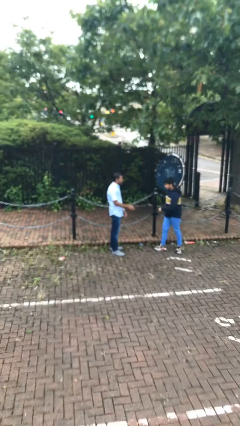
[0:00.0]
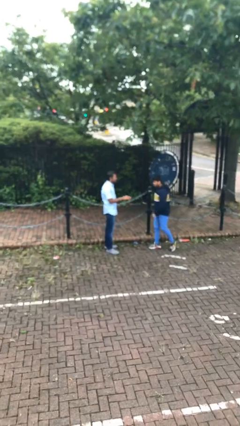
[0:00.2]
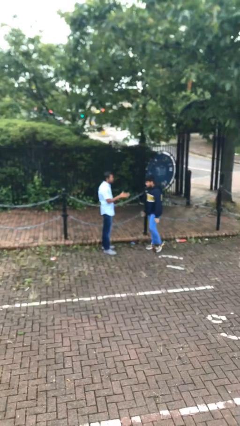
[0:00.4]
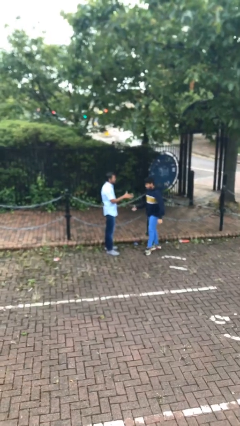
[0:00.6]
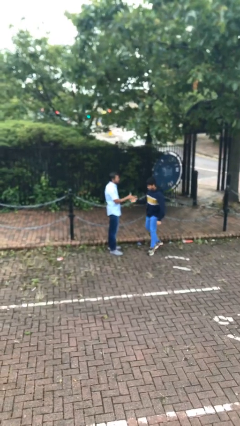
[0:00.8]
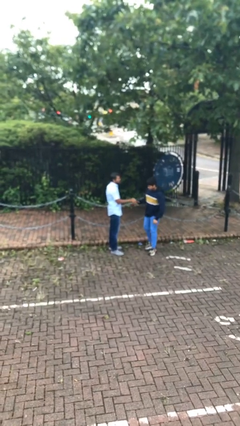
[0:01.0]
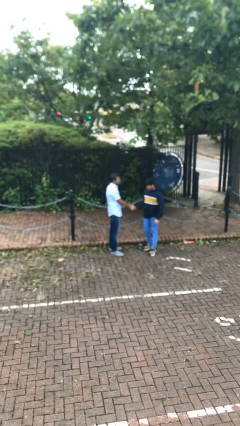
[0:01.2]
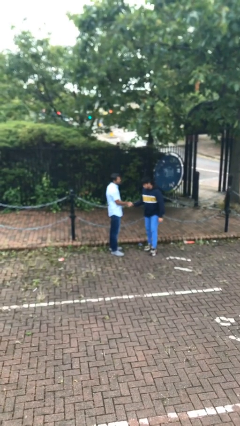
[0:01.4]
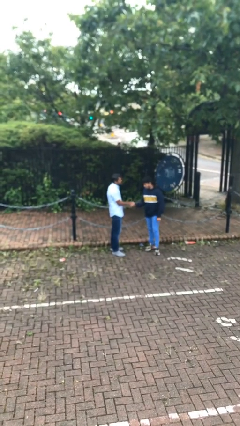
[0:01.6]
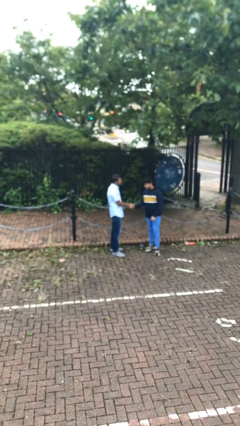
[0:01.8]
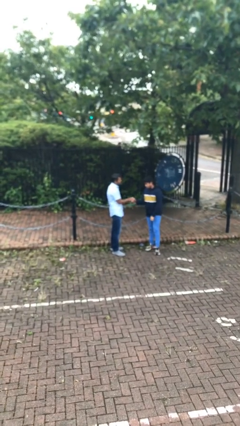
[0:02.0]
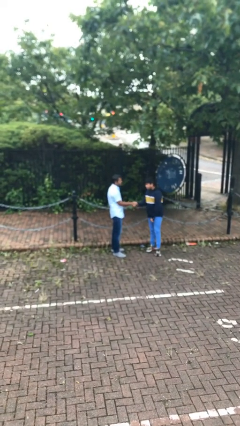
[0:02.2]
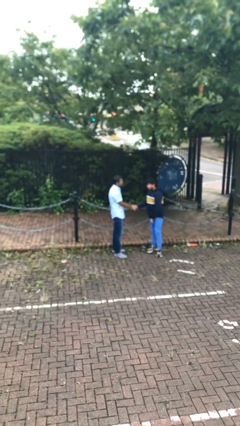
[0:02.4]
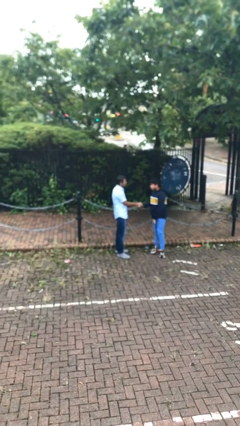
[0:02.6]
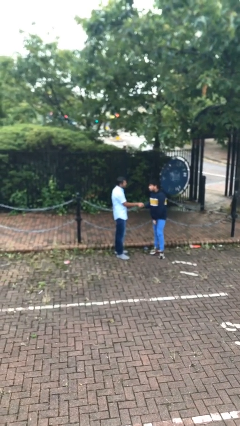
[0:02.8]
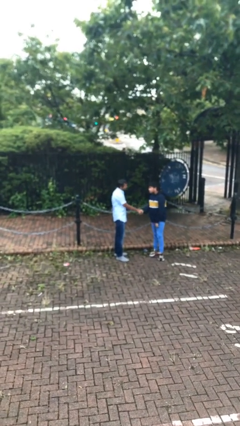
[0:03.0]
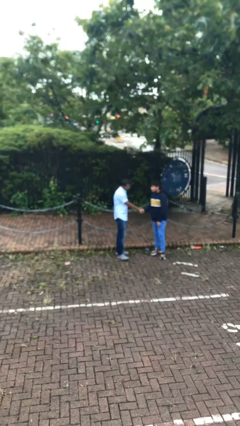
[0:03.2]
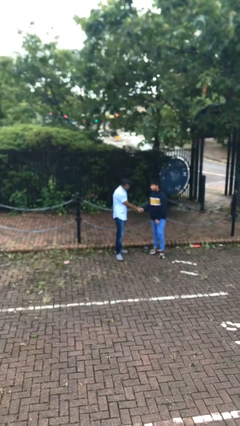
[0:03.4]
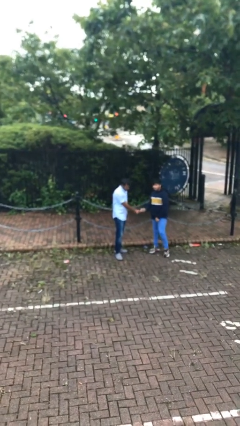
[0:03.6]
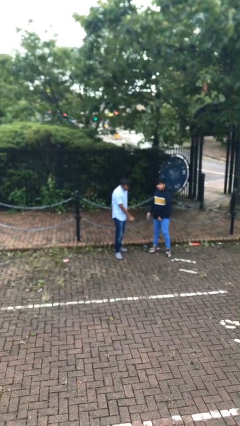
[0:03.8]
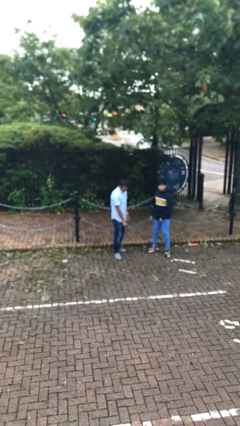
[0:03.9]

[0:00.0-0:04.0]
person shakes hand

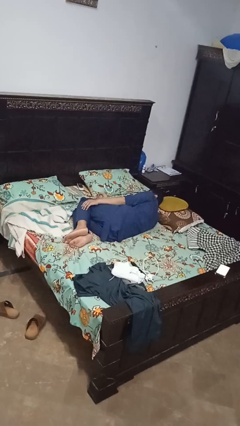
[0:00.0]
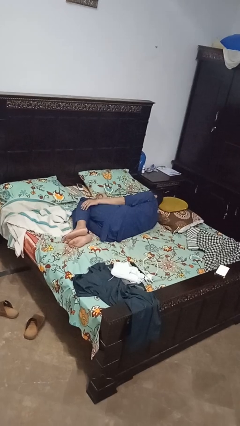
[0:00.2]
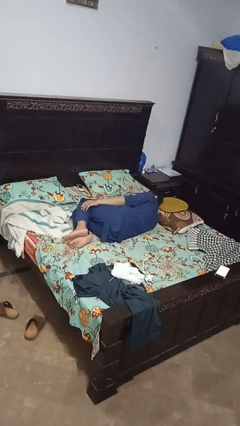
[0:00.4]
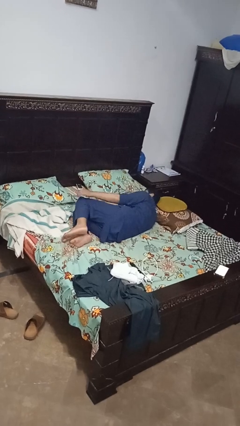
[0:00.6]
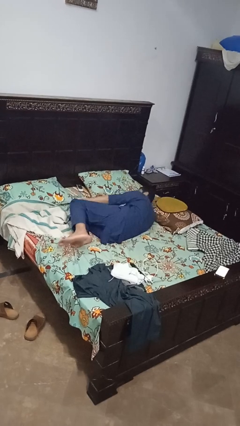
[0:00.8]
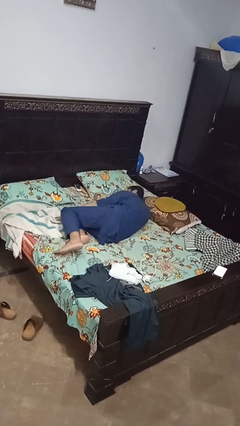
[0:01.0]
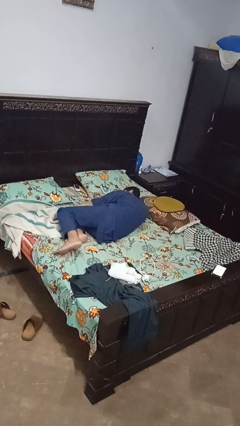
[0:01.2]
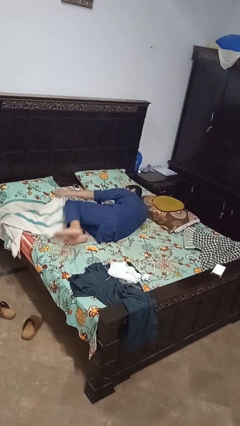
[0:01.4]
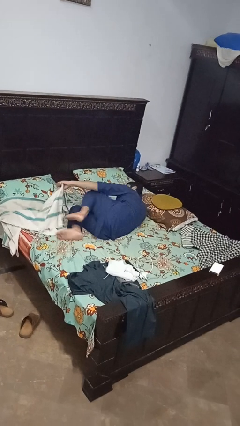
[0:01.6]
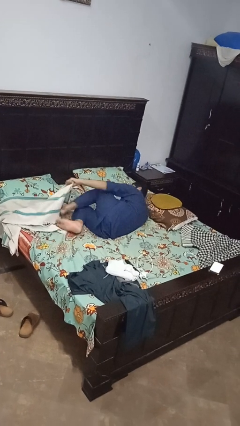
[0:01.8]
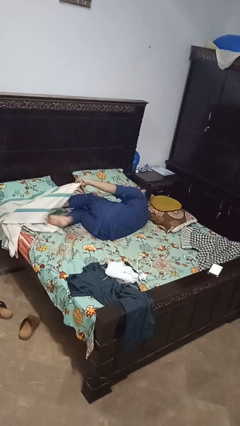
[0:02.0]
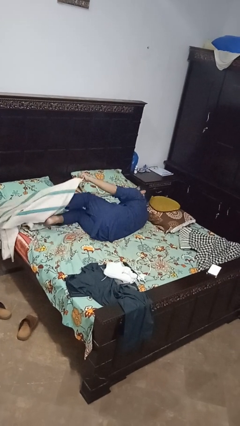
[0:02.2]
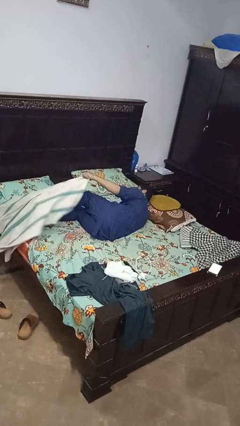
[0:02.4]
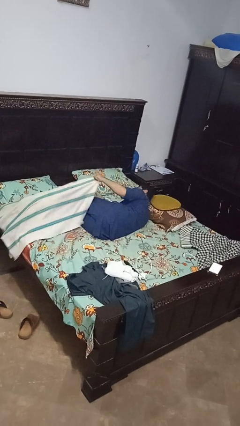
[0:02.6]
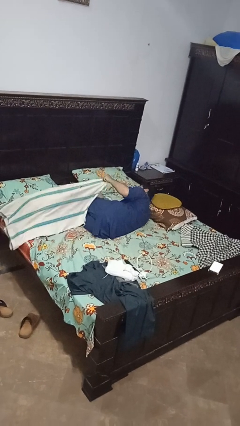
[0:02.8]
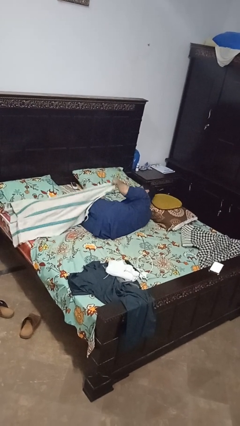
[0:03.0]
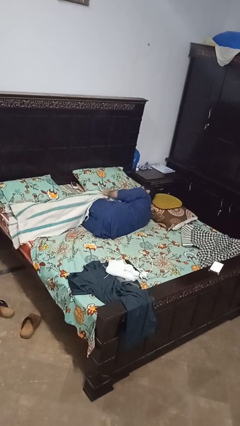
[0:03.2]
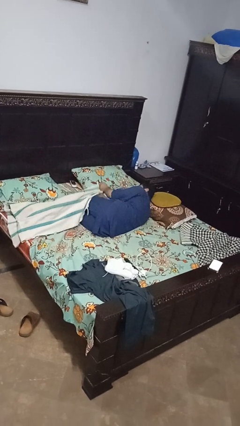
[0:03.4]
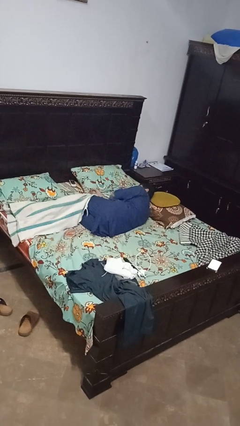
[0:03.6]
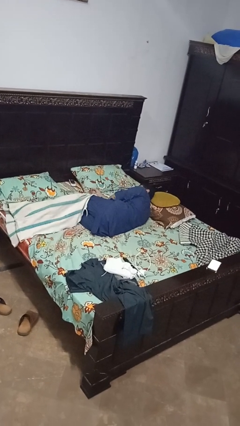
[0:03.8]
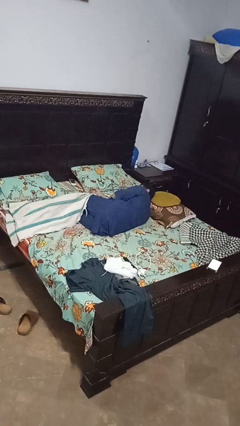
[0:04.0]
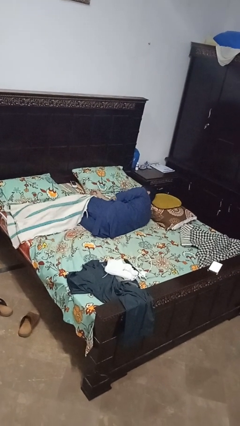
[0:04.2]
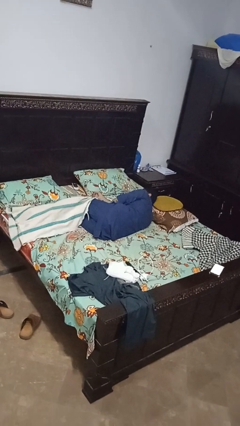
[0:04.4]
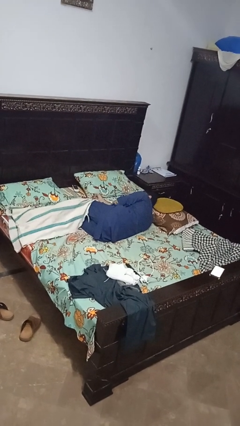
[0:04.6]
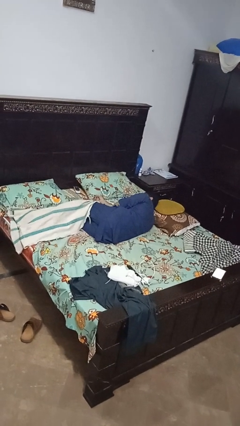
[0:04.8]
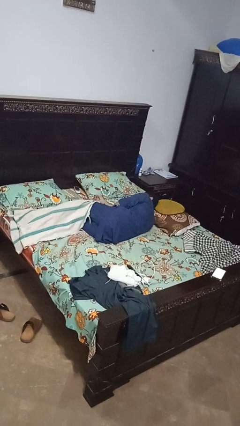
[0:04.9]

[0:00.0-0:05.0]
person covers with bedsheets

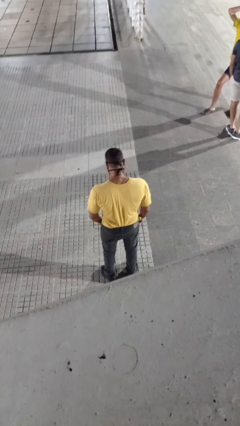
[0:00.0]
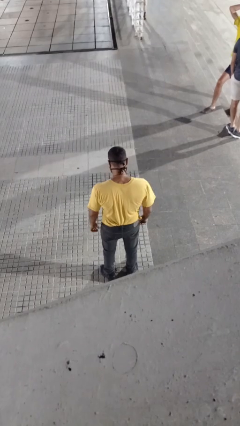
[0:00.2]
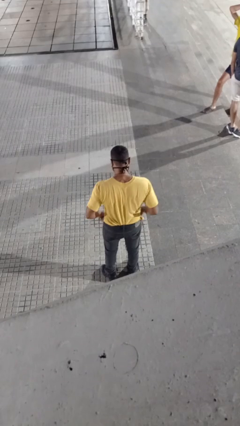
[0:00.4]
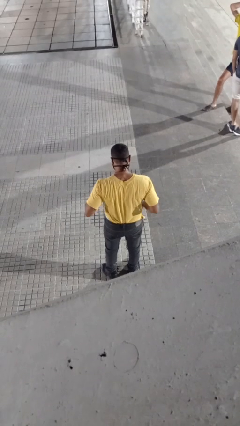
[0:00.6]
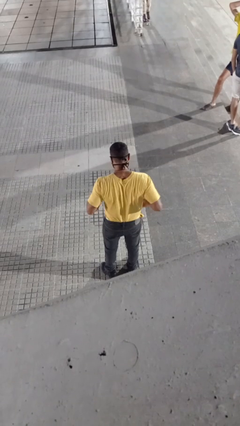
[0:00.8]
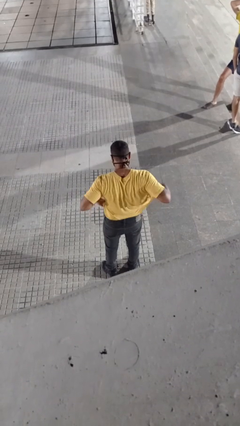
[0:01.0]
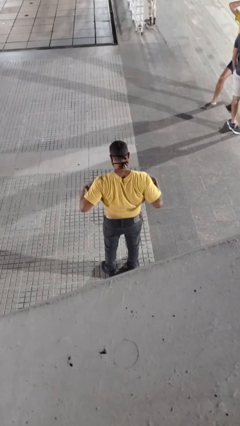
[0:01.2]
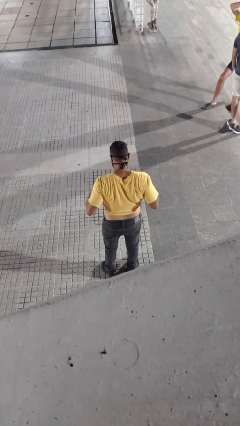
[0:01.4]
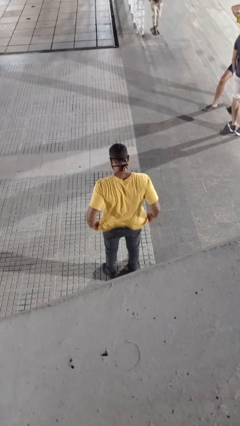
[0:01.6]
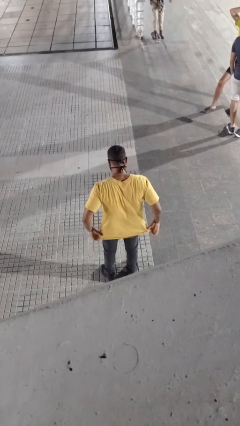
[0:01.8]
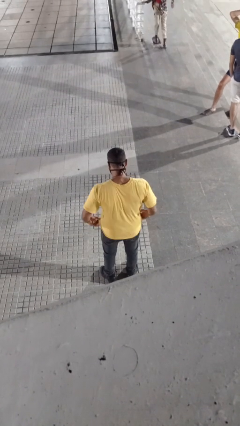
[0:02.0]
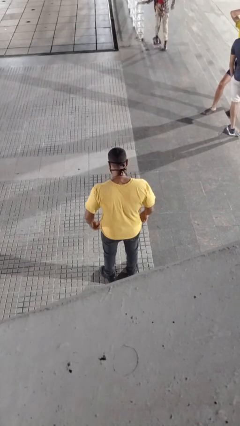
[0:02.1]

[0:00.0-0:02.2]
person untucks shirt

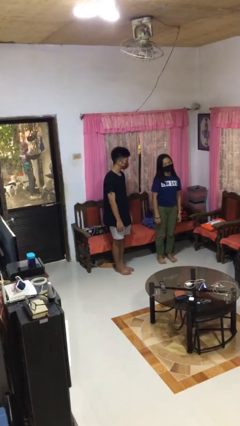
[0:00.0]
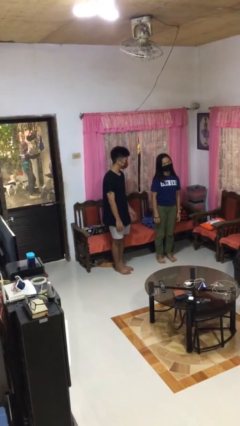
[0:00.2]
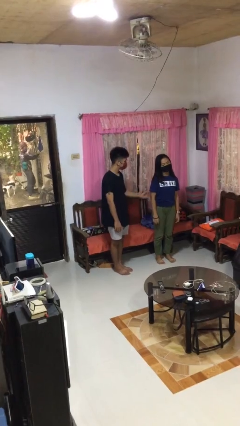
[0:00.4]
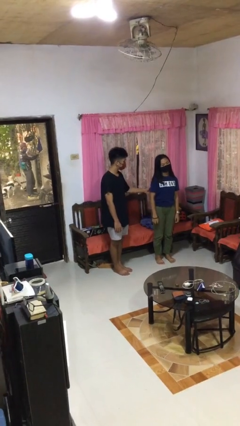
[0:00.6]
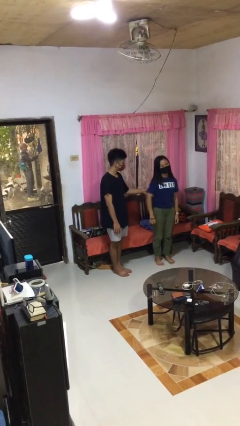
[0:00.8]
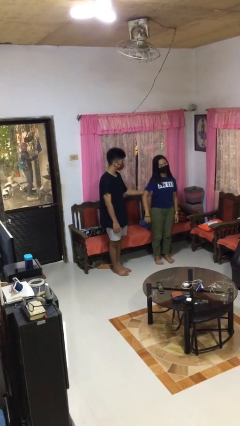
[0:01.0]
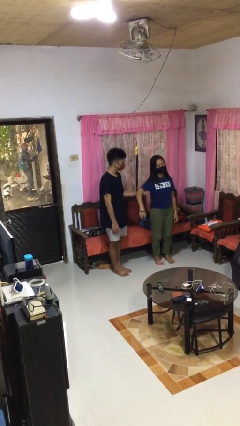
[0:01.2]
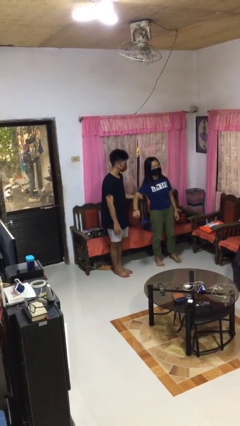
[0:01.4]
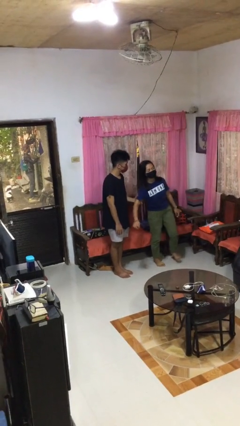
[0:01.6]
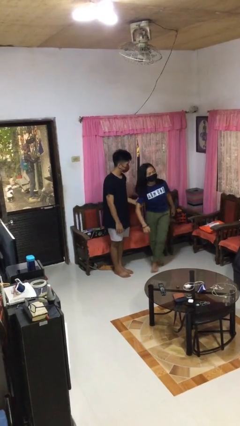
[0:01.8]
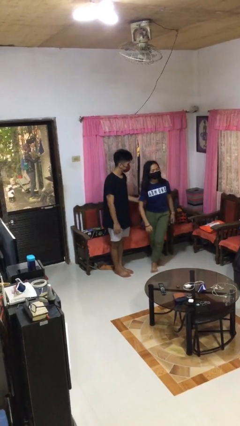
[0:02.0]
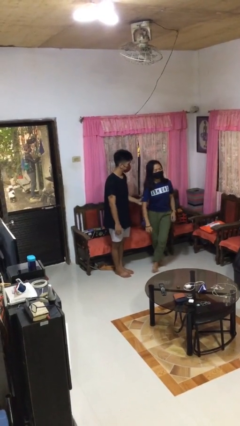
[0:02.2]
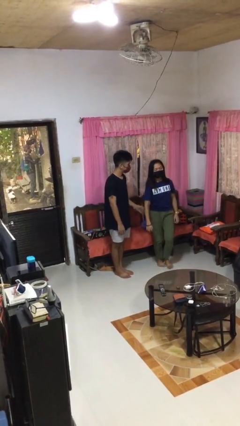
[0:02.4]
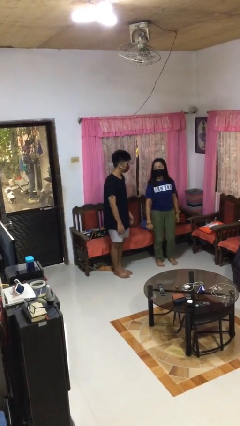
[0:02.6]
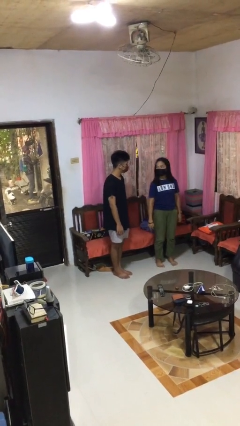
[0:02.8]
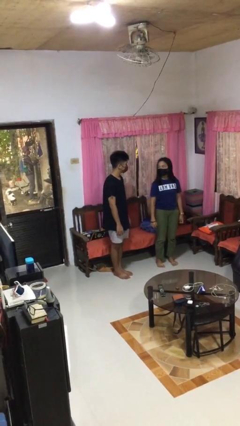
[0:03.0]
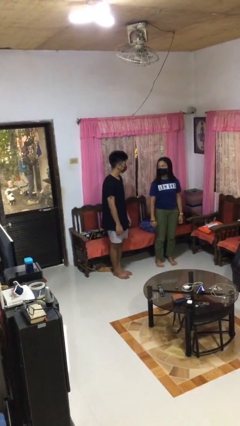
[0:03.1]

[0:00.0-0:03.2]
person grabs person by bicep

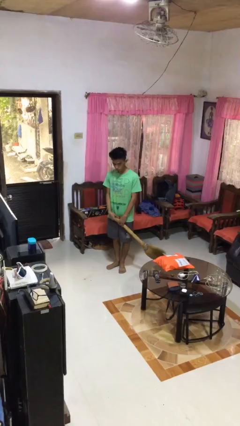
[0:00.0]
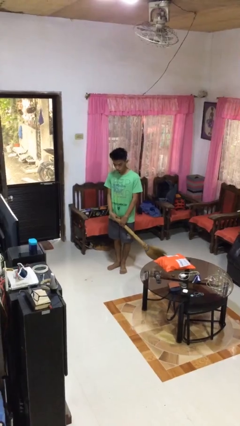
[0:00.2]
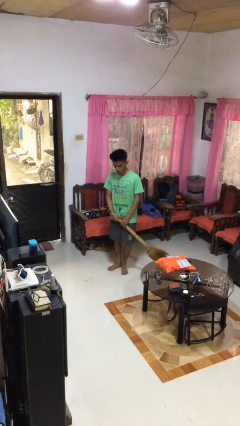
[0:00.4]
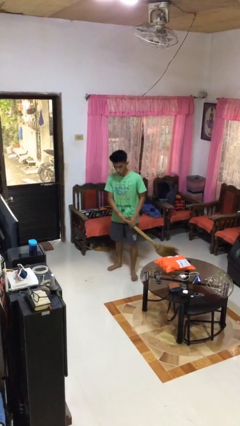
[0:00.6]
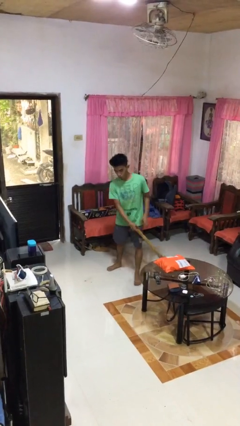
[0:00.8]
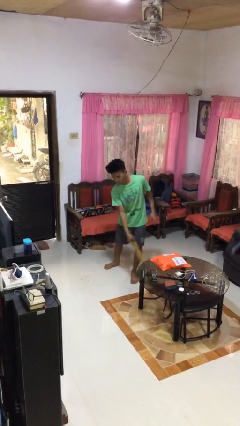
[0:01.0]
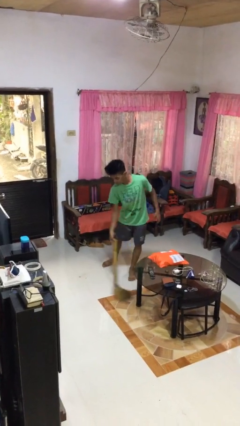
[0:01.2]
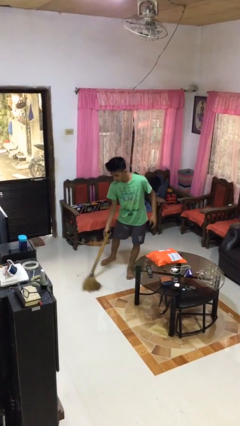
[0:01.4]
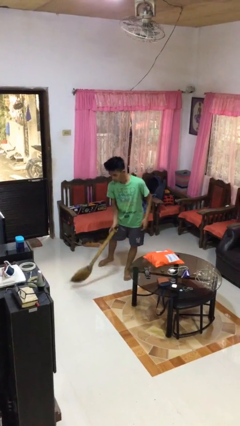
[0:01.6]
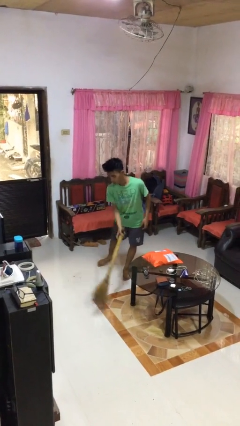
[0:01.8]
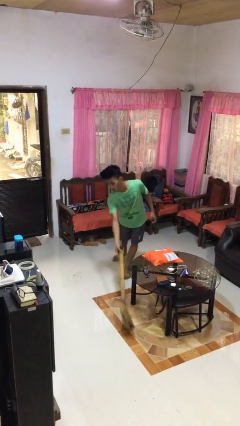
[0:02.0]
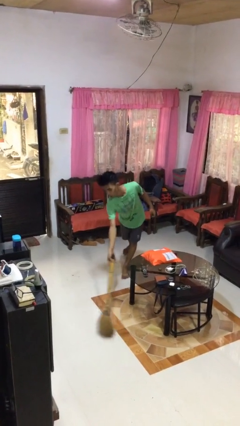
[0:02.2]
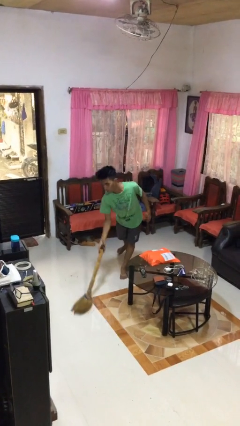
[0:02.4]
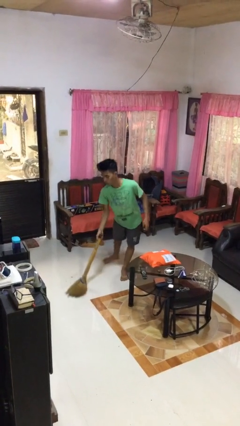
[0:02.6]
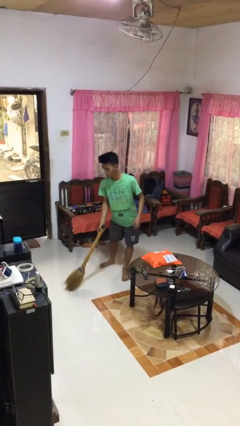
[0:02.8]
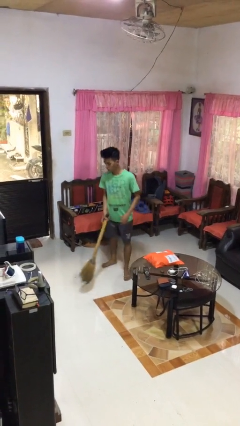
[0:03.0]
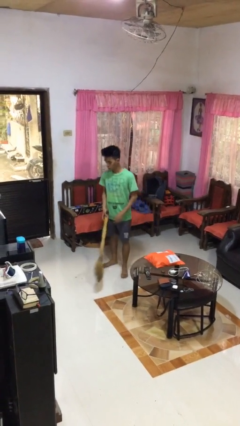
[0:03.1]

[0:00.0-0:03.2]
person sweeps floor

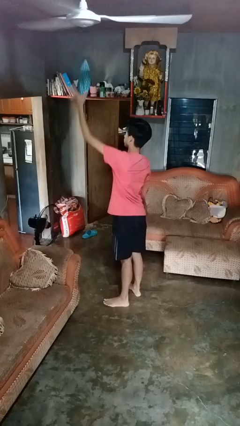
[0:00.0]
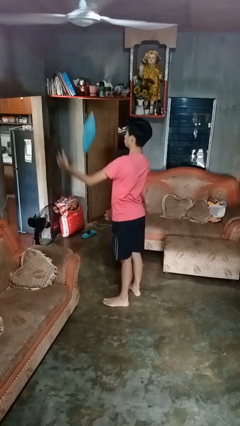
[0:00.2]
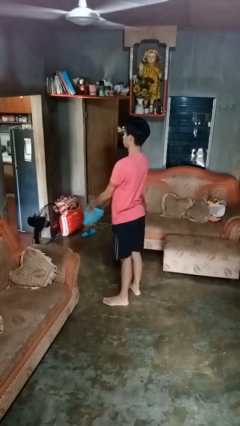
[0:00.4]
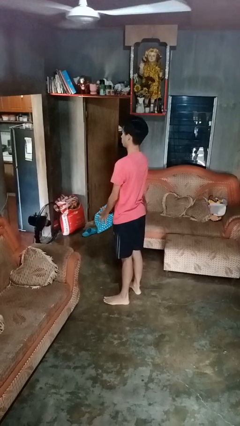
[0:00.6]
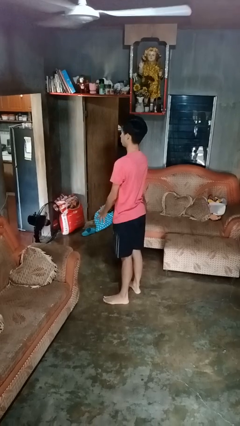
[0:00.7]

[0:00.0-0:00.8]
person drops object
